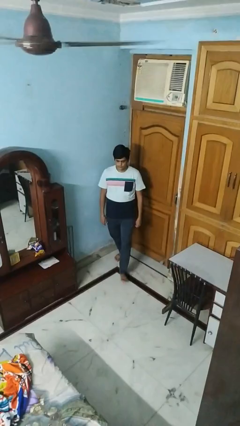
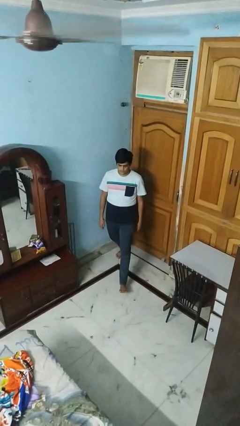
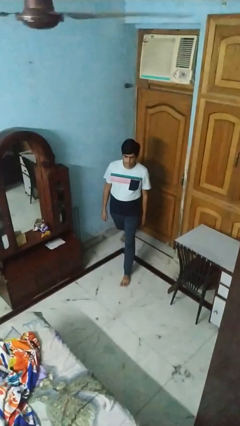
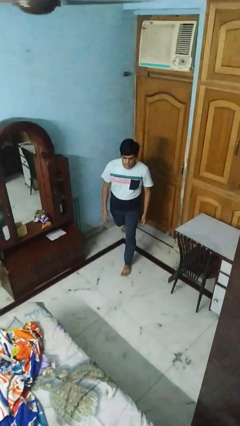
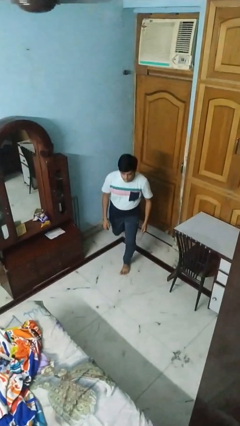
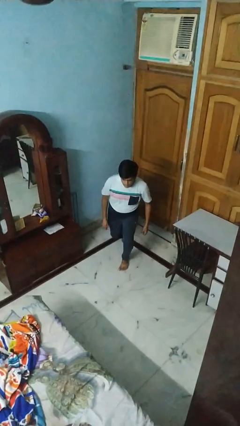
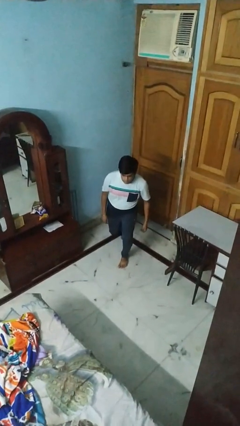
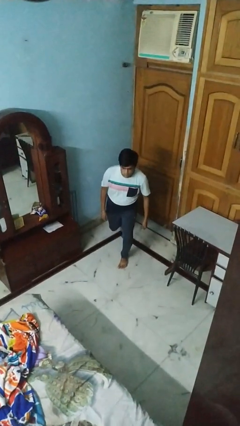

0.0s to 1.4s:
person exercises with lunges

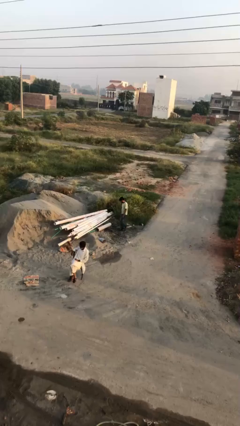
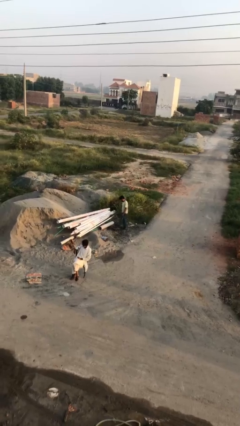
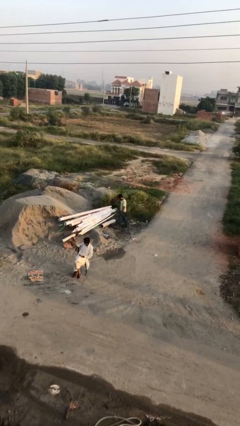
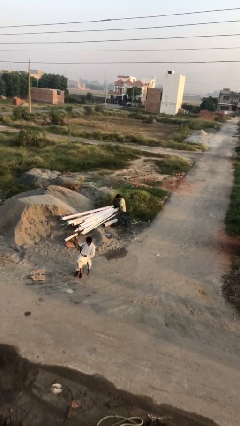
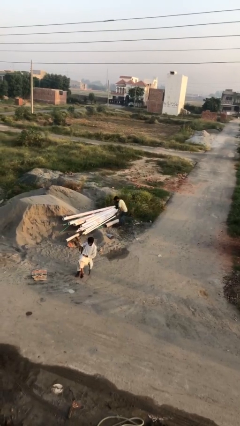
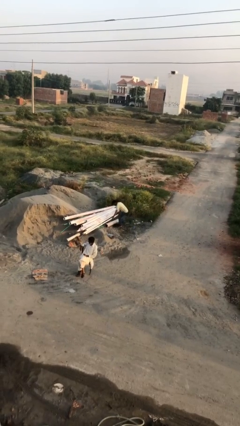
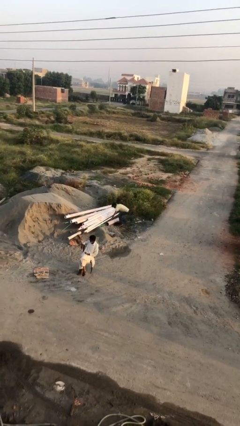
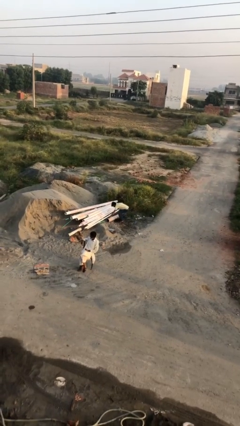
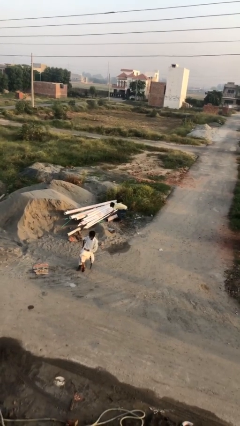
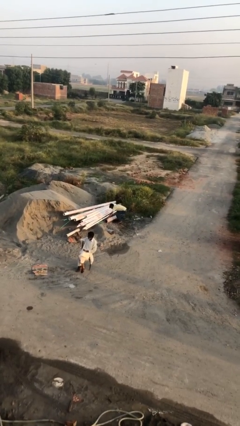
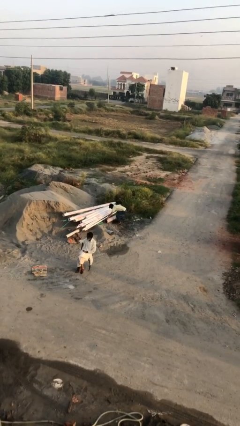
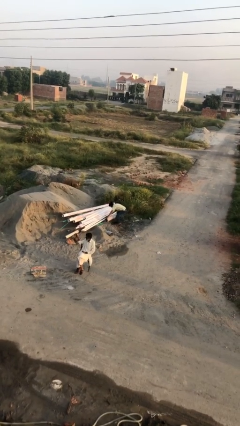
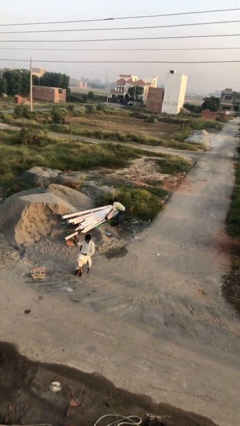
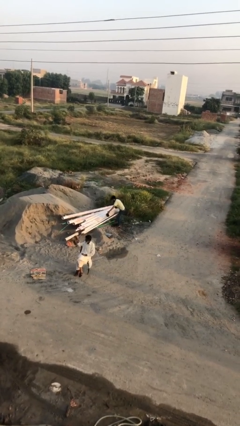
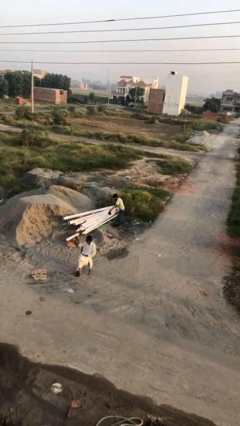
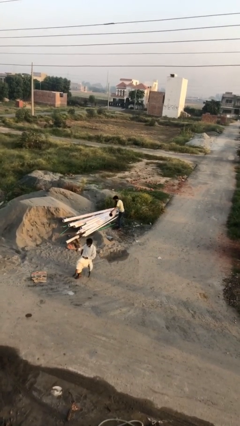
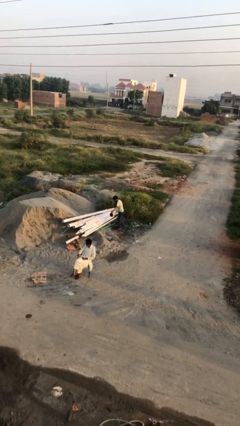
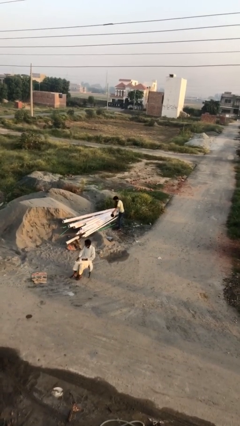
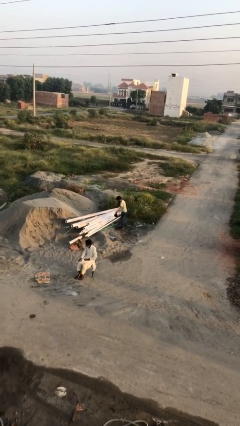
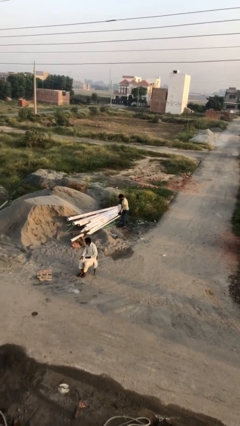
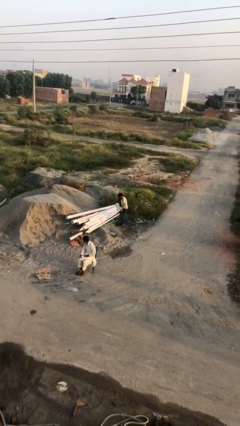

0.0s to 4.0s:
person picks up object from floor

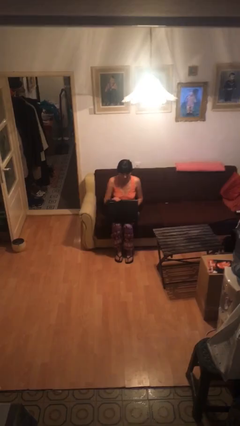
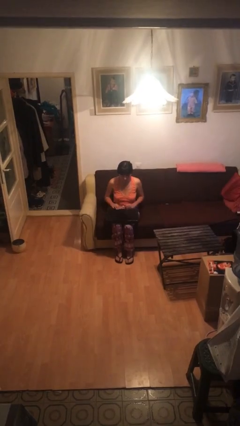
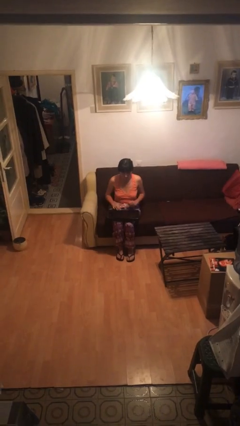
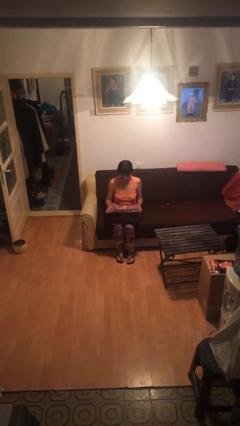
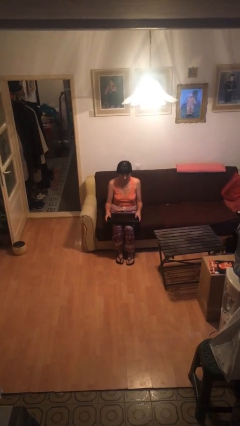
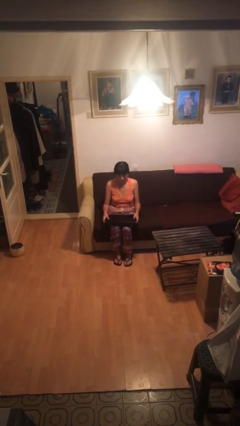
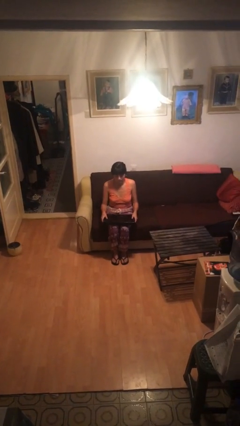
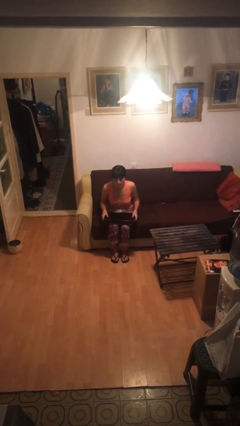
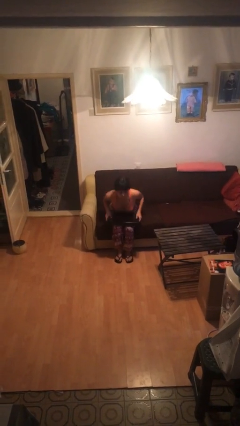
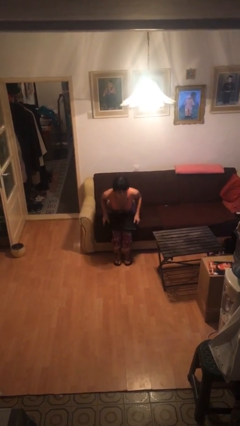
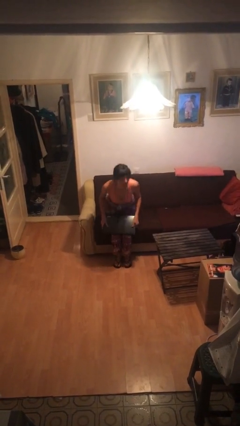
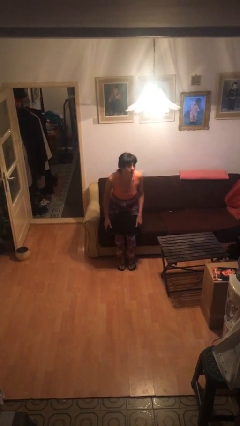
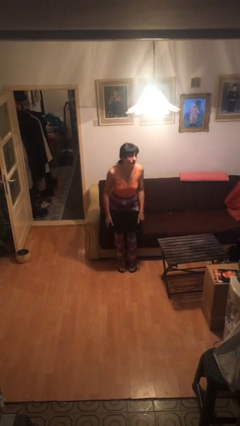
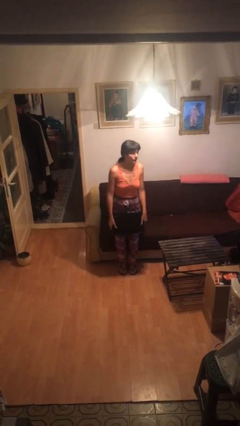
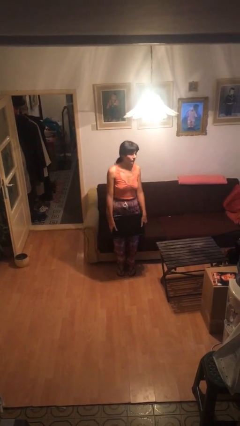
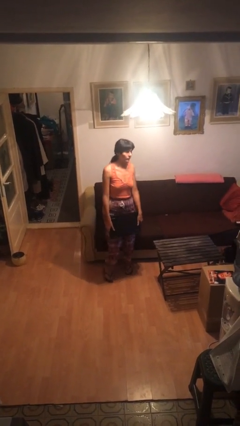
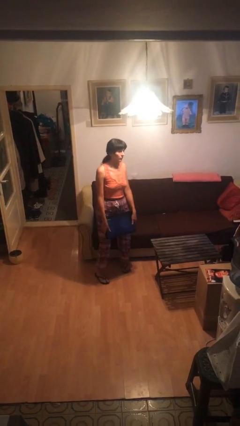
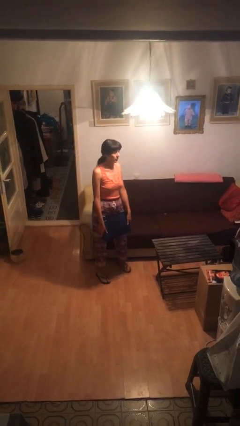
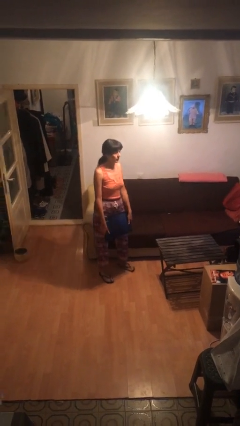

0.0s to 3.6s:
person stands up

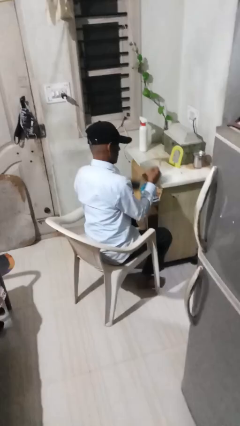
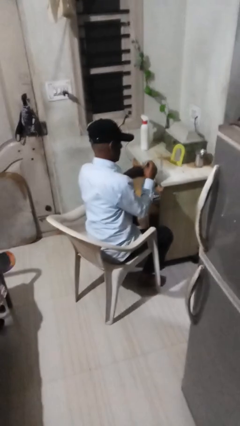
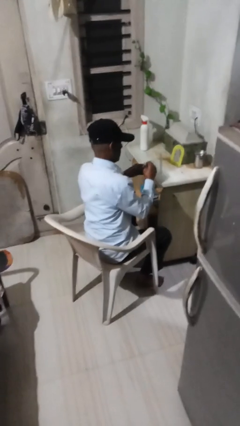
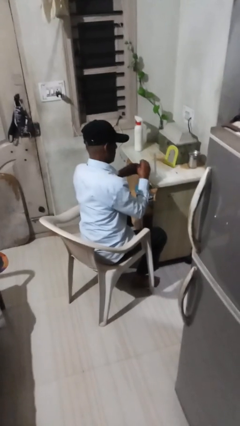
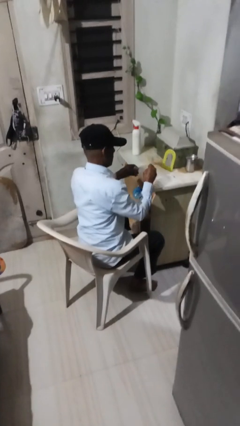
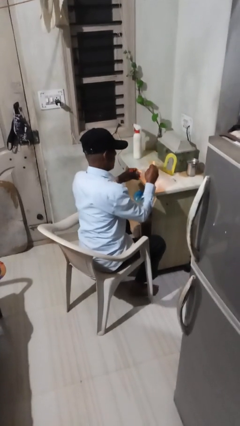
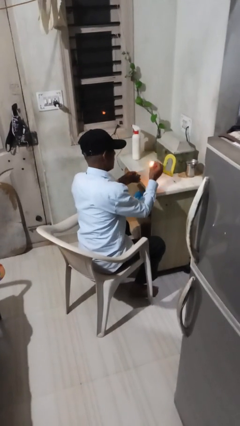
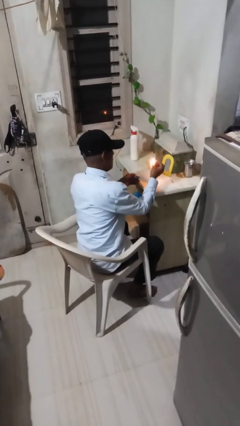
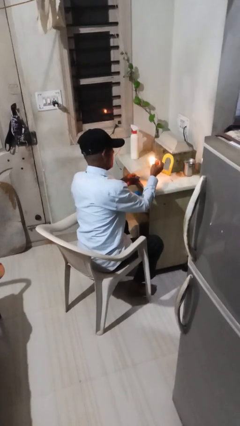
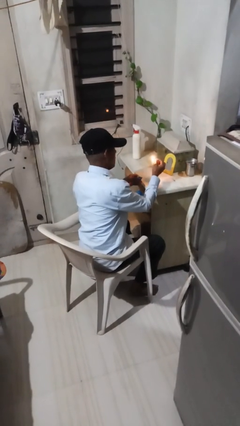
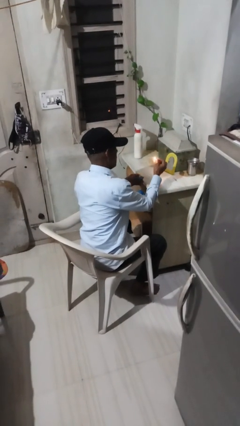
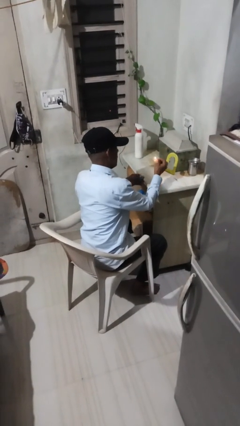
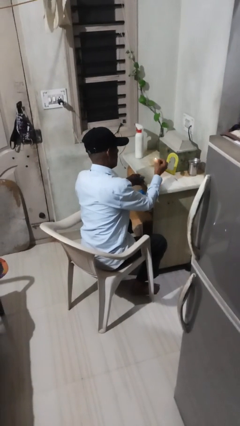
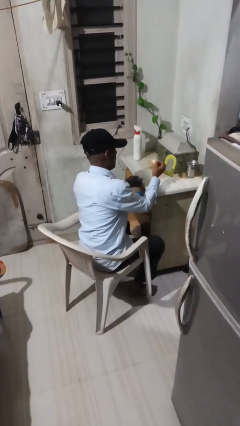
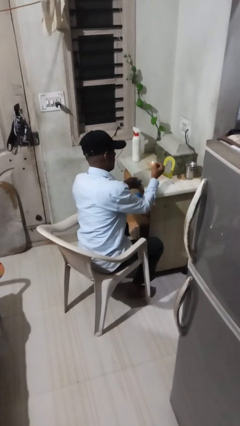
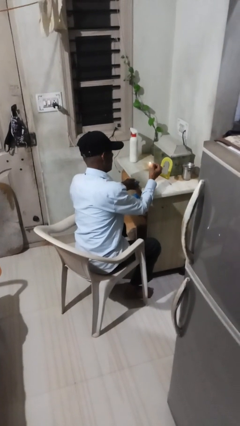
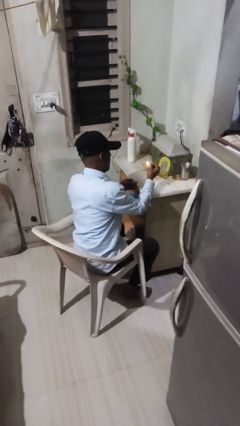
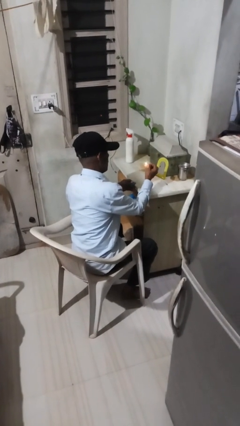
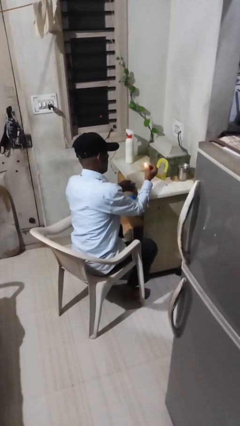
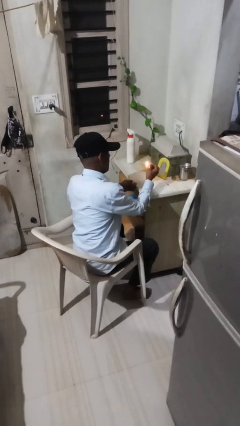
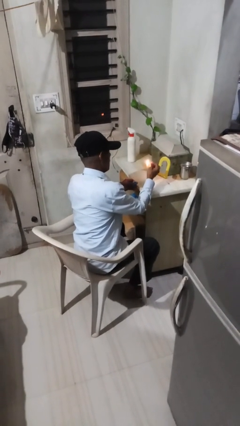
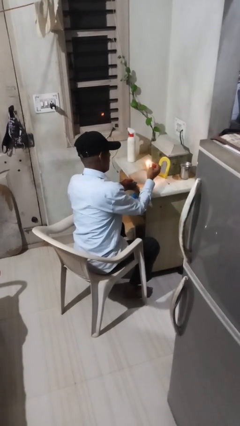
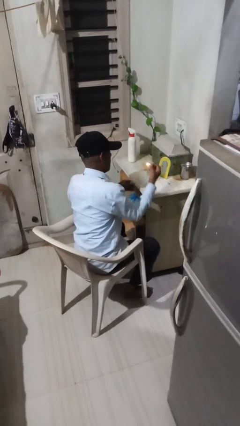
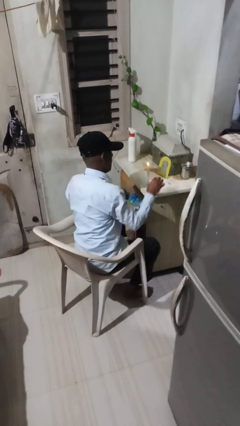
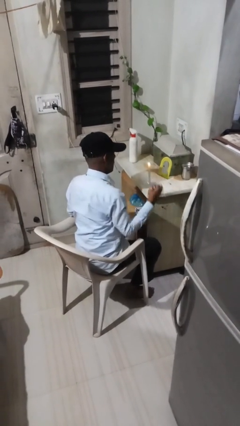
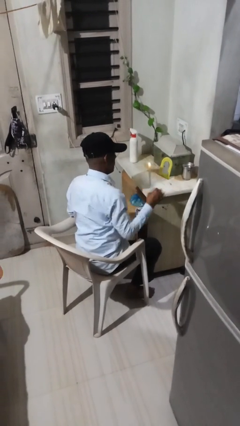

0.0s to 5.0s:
person lights candle

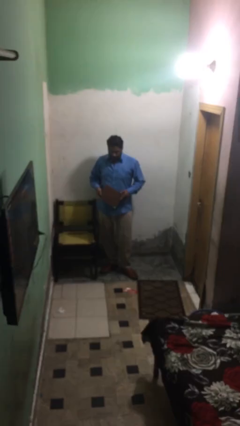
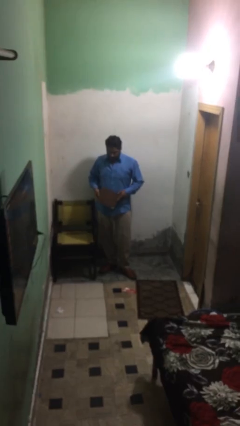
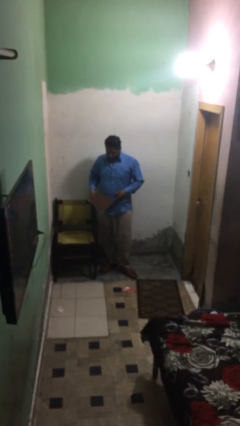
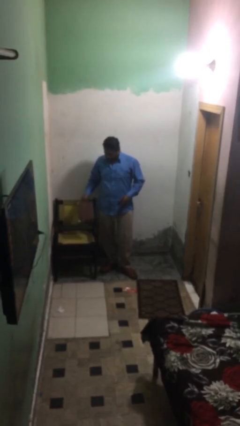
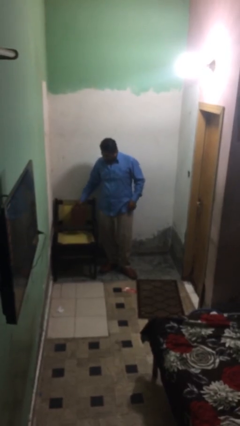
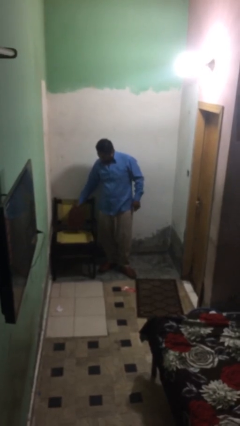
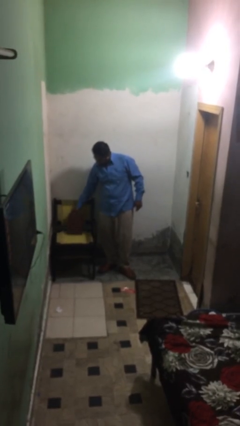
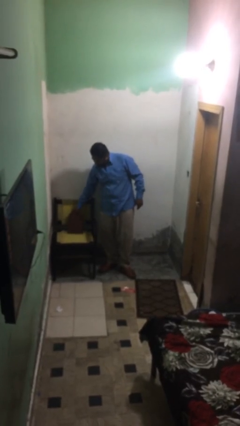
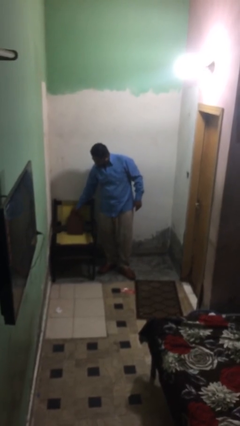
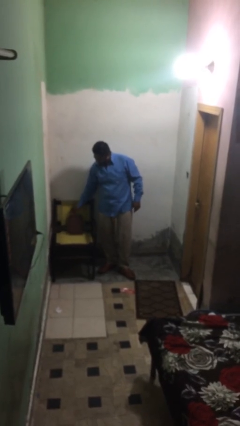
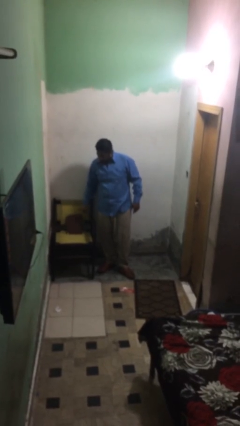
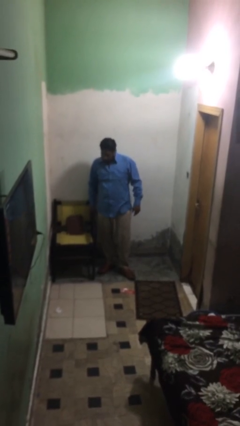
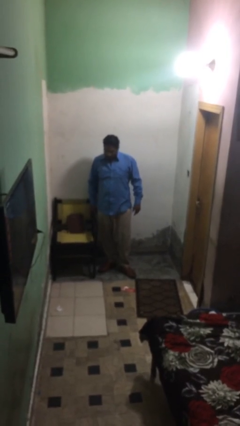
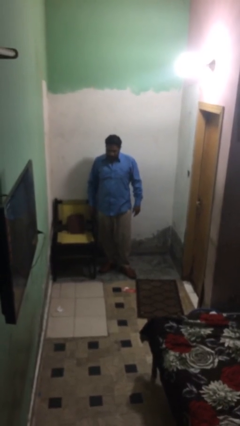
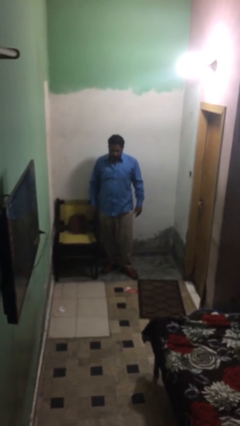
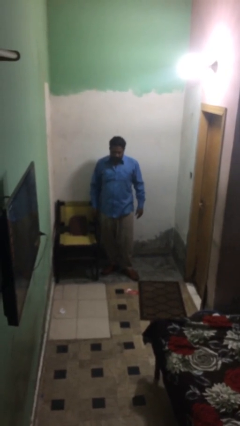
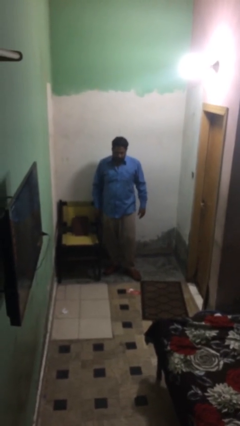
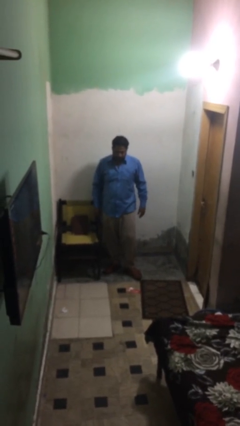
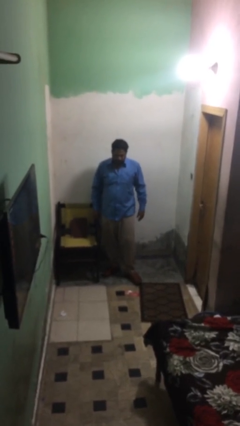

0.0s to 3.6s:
person puts down object on table
